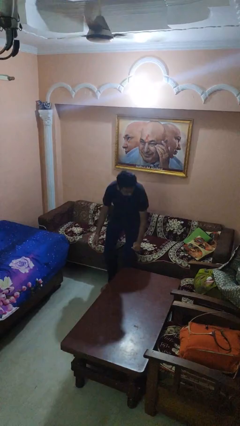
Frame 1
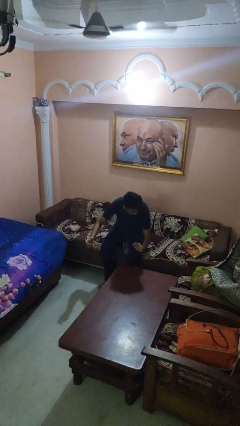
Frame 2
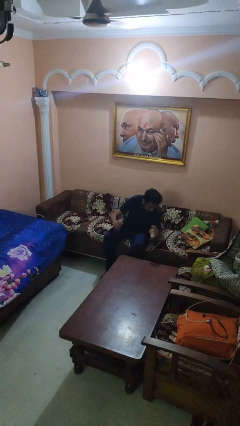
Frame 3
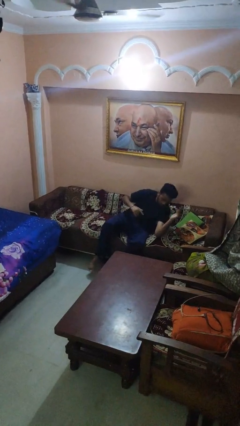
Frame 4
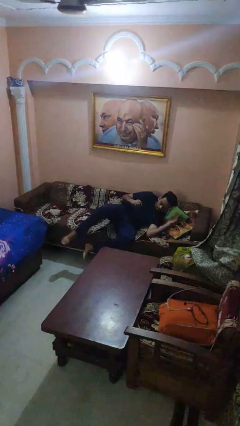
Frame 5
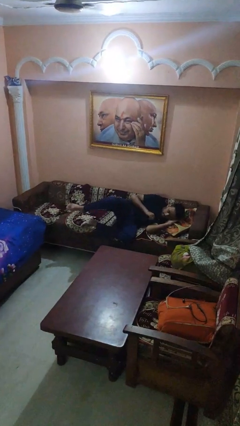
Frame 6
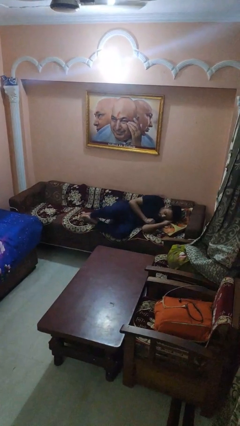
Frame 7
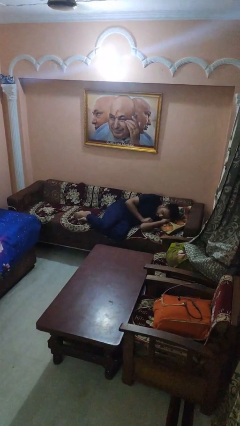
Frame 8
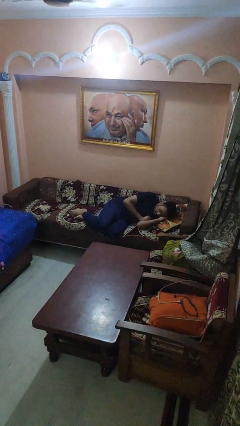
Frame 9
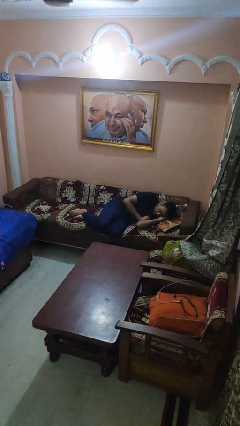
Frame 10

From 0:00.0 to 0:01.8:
person lies down on couch

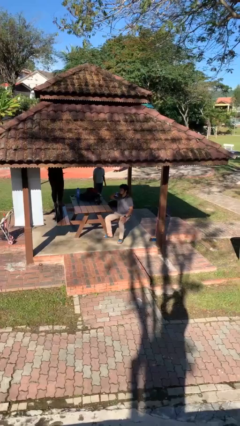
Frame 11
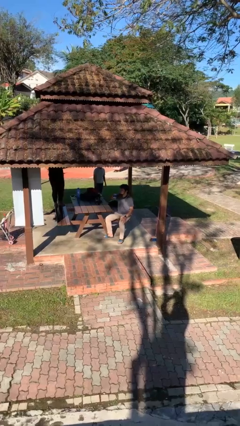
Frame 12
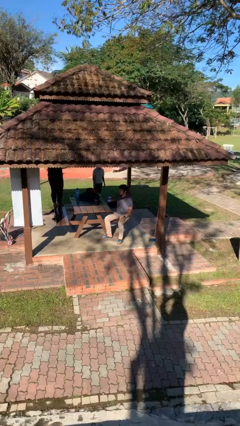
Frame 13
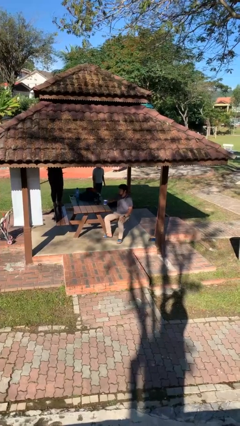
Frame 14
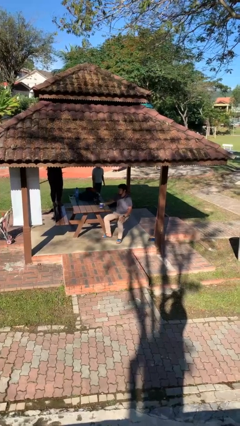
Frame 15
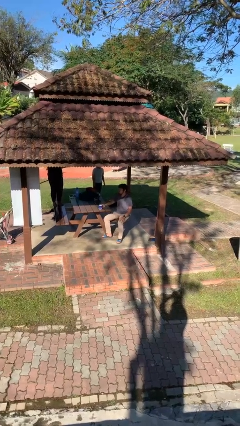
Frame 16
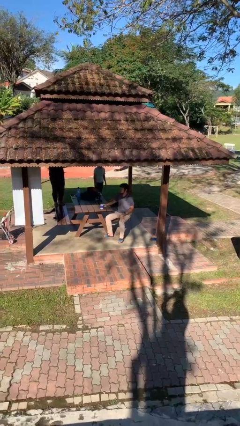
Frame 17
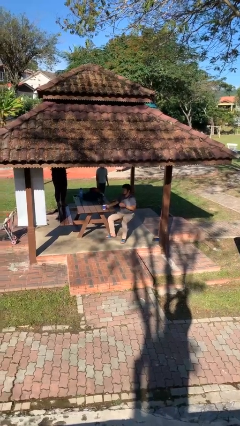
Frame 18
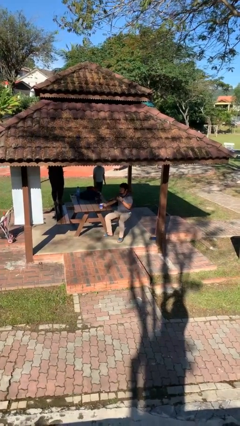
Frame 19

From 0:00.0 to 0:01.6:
person puts down object on table

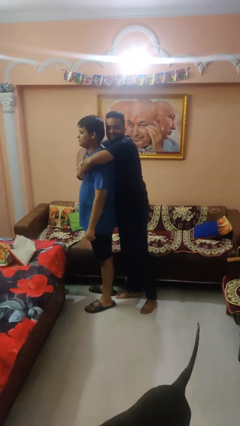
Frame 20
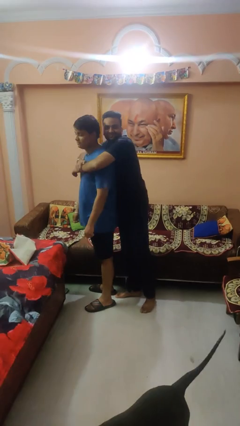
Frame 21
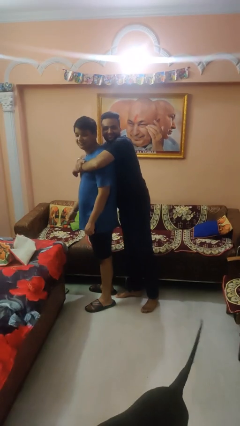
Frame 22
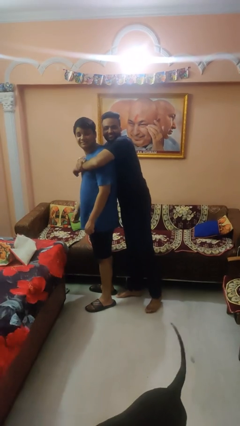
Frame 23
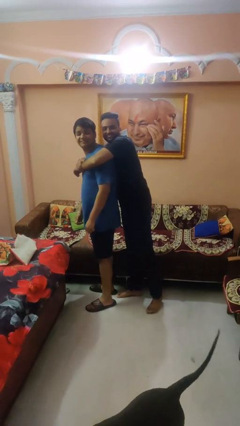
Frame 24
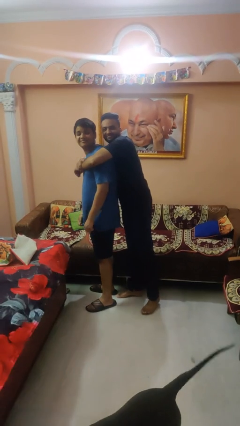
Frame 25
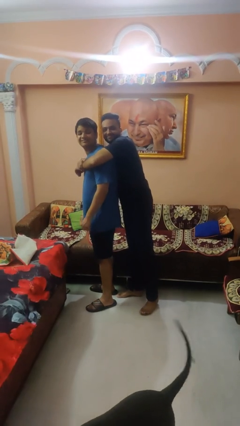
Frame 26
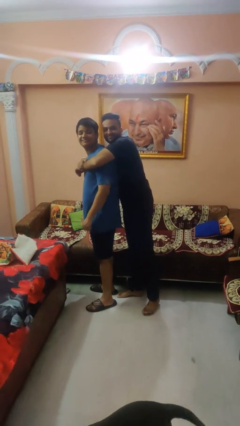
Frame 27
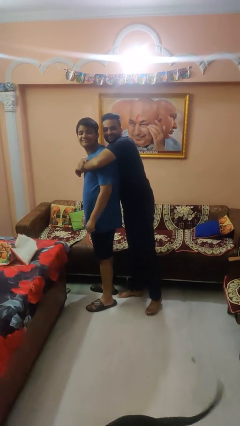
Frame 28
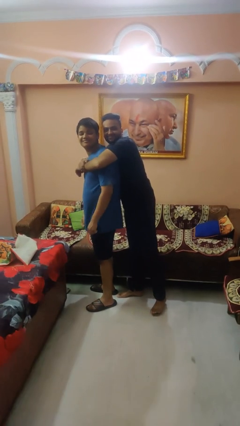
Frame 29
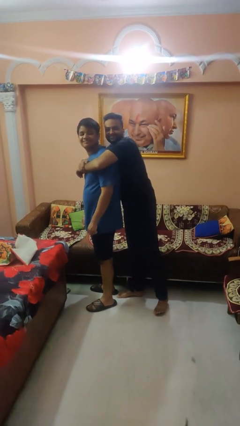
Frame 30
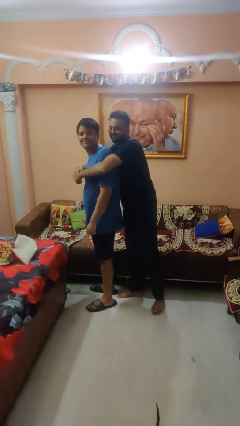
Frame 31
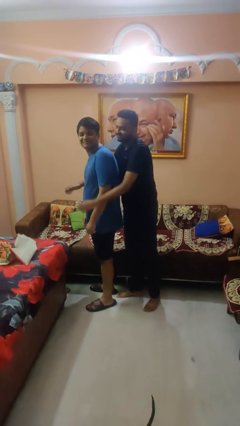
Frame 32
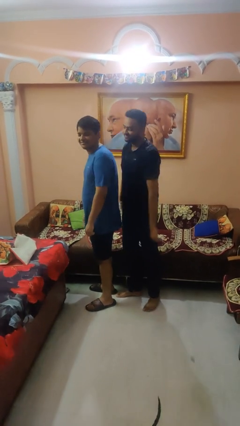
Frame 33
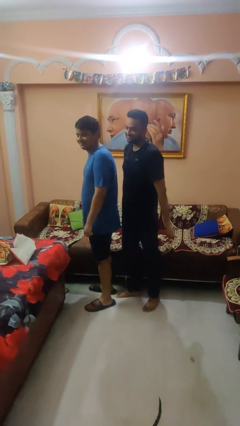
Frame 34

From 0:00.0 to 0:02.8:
person hugs person from behind

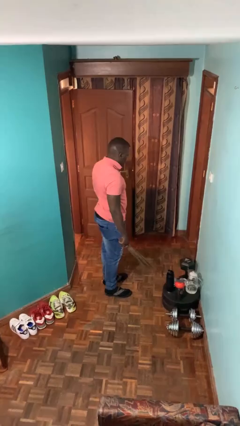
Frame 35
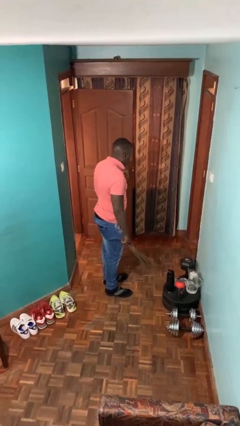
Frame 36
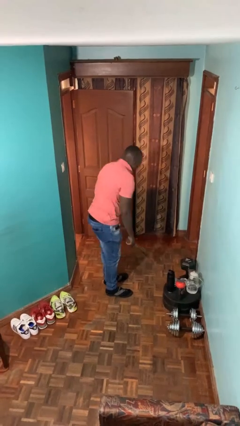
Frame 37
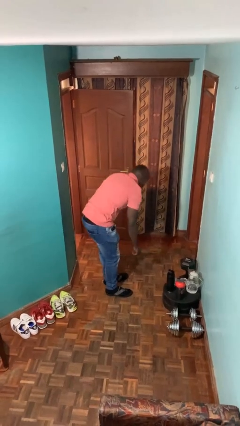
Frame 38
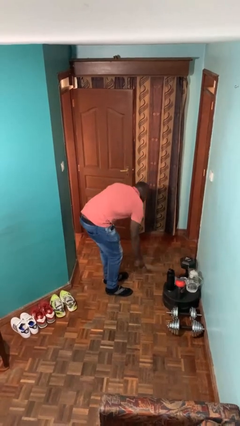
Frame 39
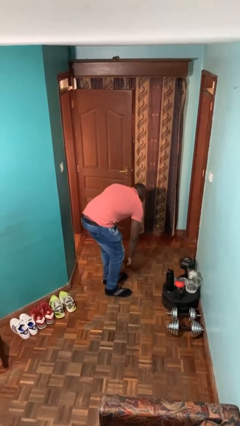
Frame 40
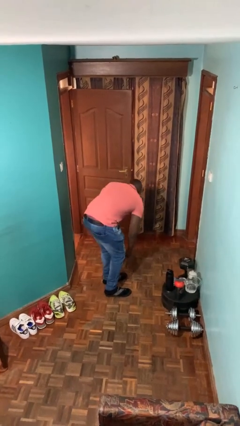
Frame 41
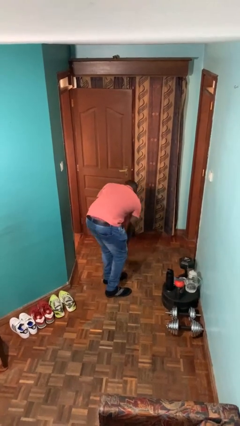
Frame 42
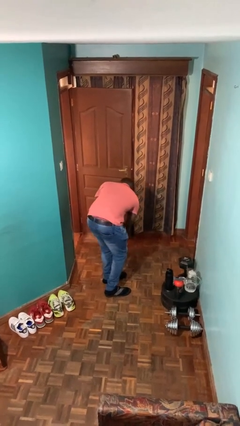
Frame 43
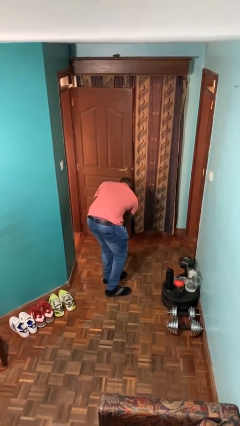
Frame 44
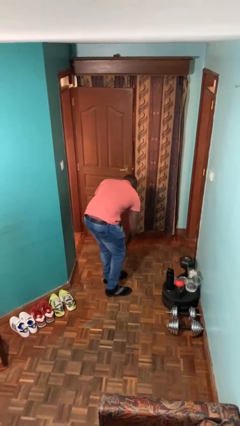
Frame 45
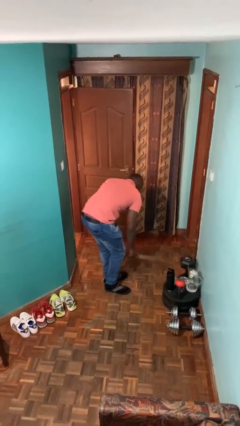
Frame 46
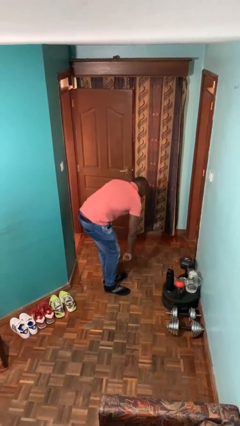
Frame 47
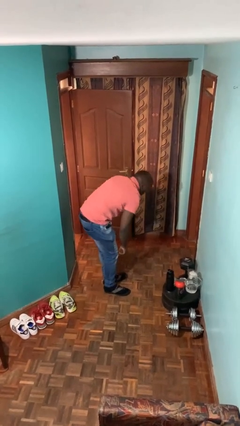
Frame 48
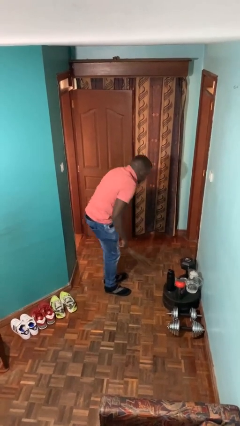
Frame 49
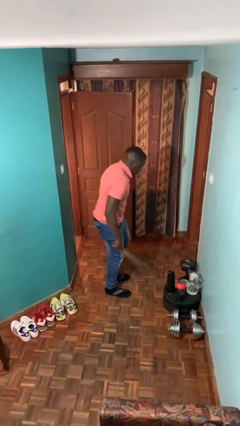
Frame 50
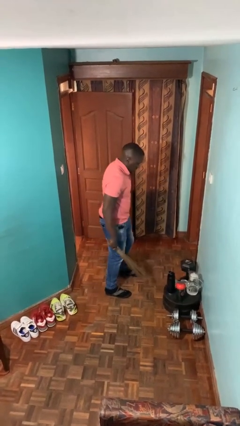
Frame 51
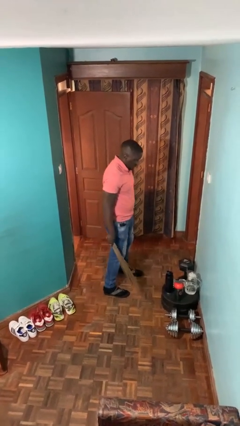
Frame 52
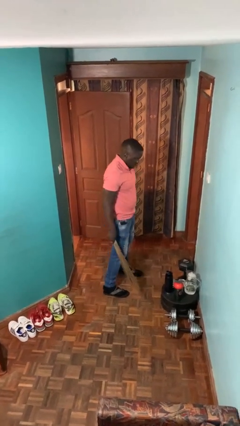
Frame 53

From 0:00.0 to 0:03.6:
person sweeps floor

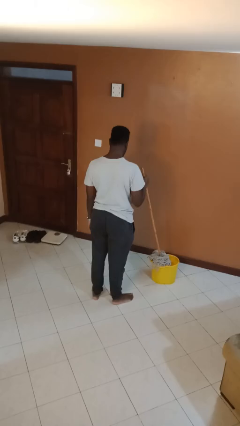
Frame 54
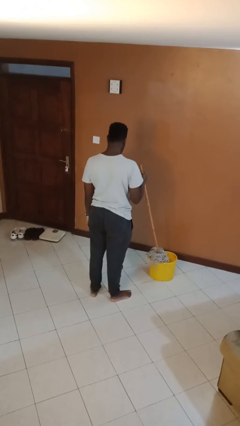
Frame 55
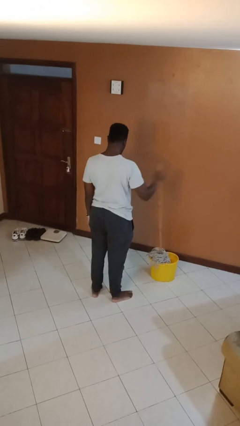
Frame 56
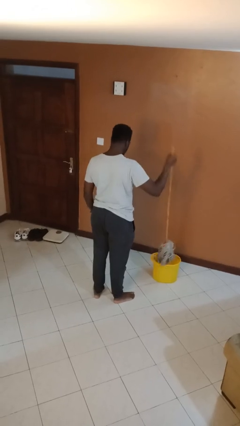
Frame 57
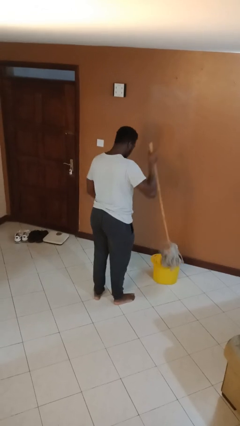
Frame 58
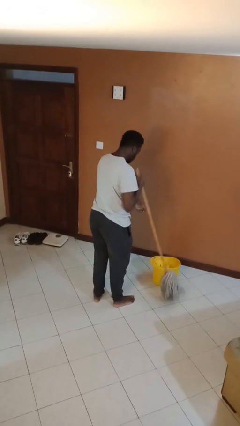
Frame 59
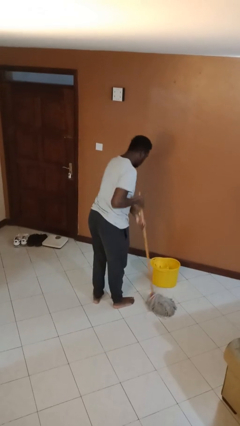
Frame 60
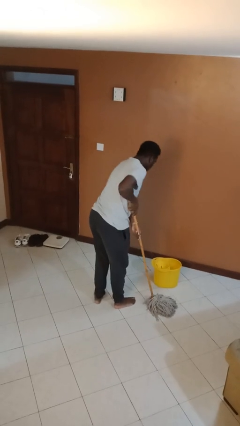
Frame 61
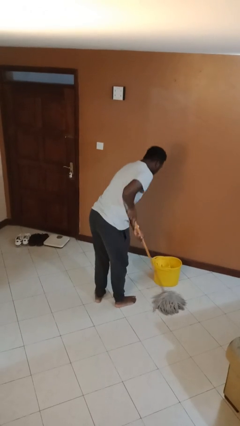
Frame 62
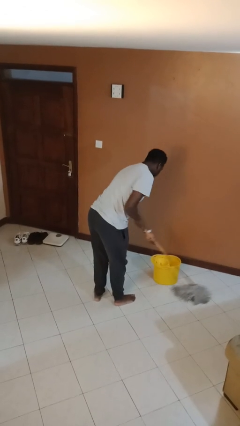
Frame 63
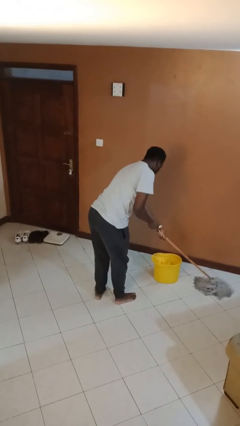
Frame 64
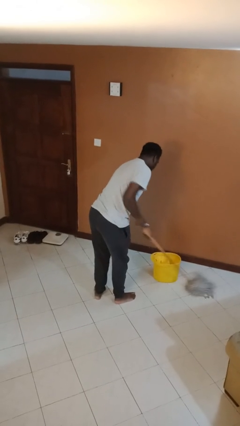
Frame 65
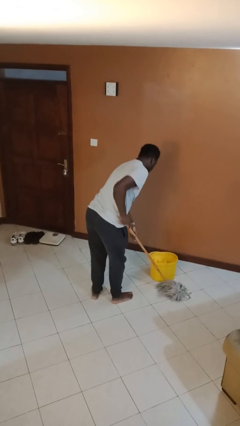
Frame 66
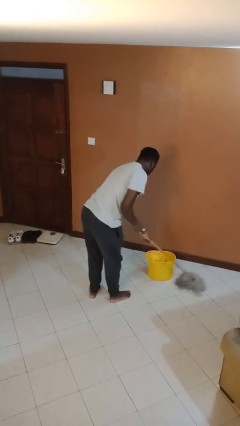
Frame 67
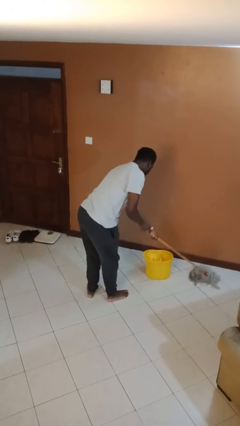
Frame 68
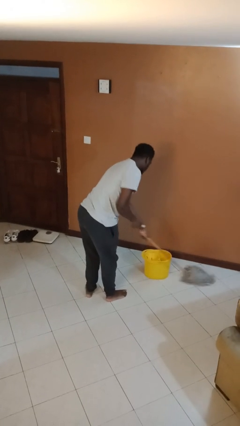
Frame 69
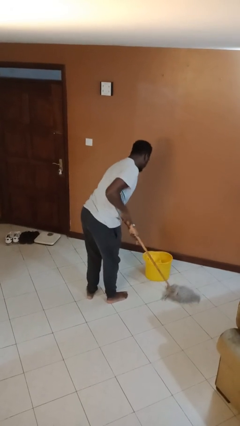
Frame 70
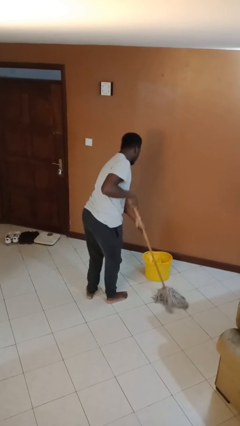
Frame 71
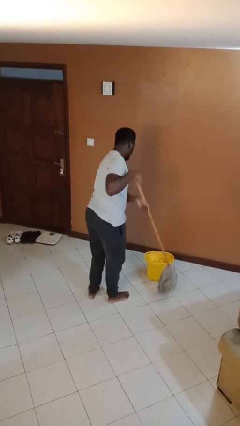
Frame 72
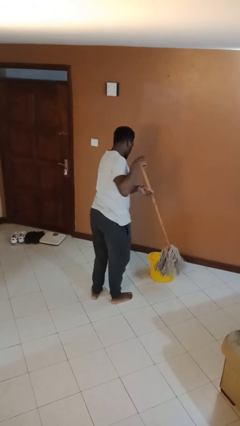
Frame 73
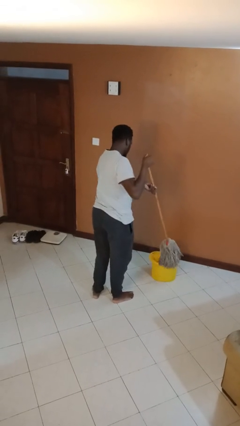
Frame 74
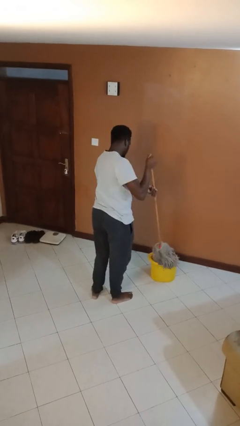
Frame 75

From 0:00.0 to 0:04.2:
person mops

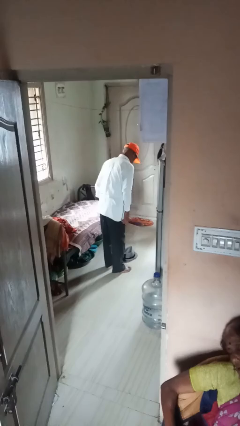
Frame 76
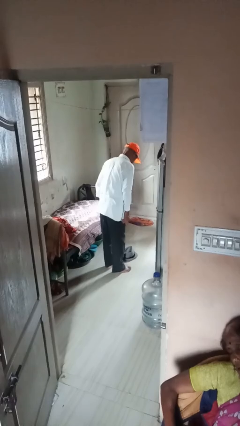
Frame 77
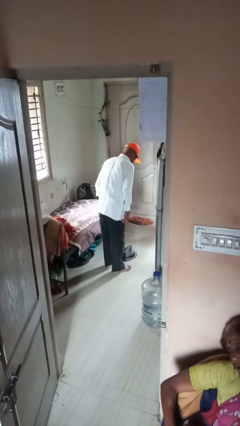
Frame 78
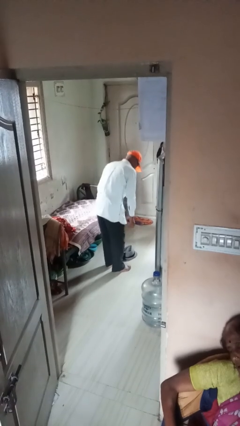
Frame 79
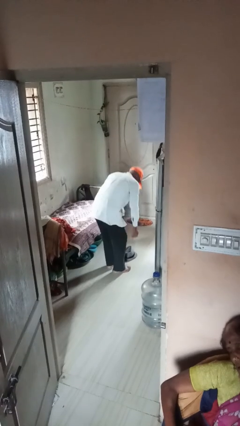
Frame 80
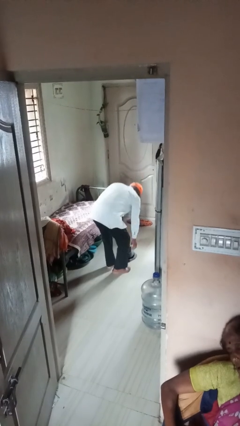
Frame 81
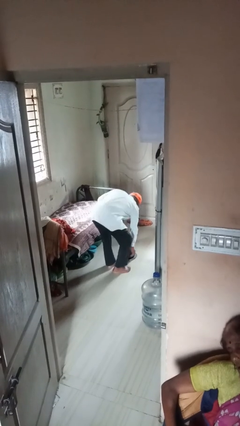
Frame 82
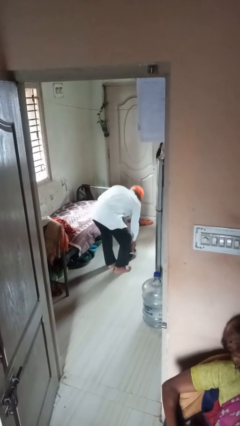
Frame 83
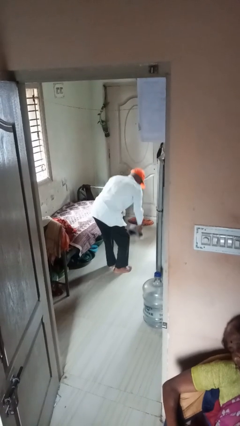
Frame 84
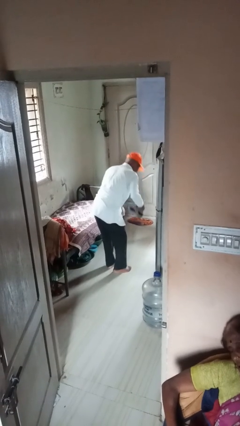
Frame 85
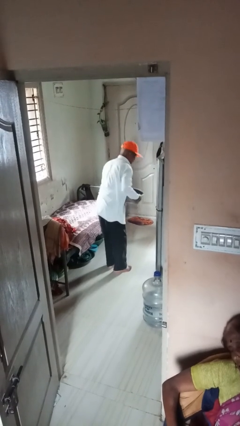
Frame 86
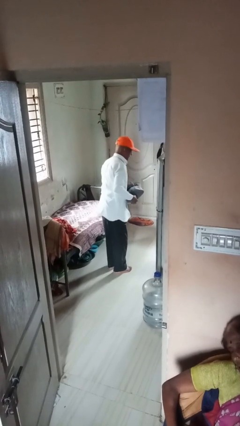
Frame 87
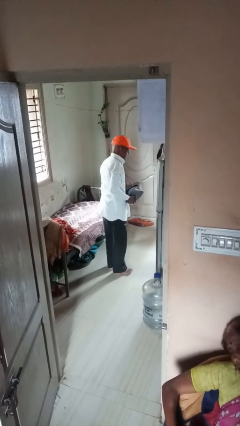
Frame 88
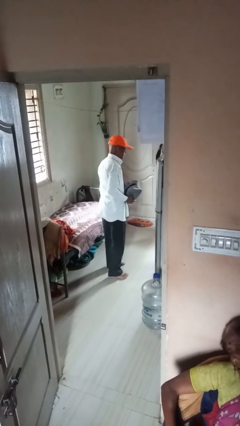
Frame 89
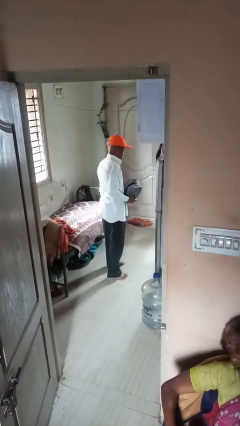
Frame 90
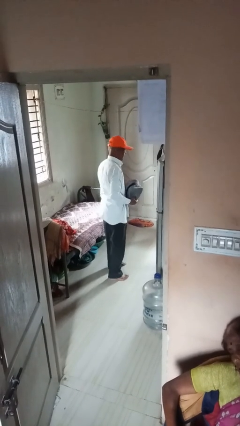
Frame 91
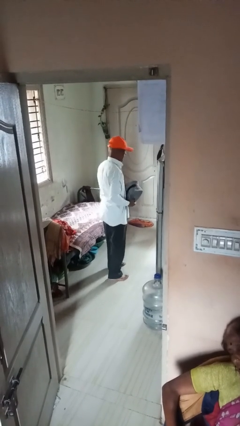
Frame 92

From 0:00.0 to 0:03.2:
person picks up object from floor
